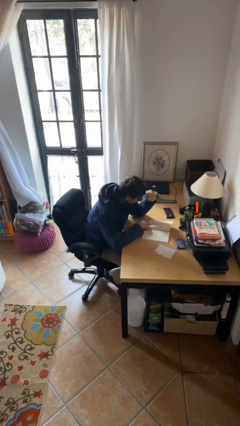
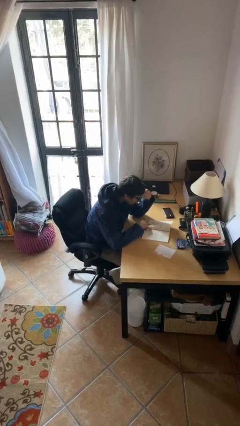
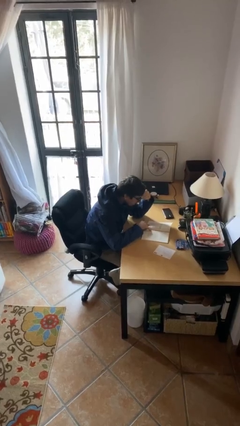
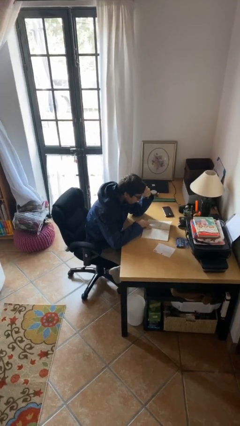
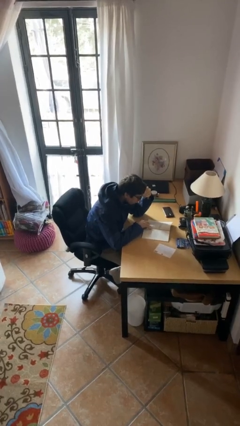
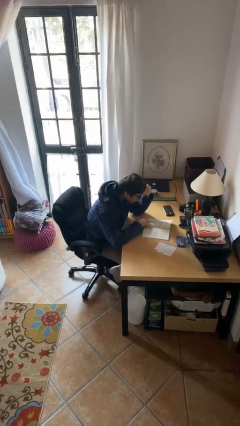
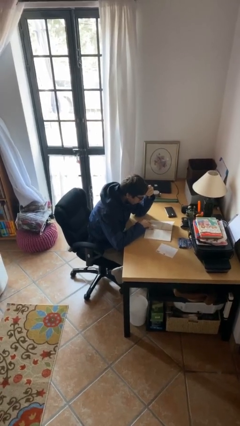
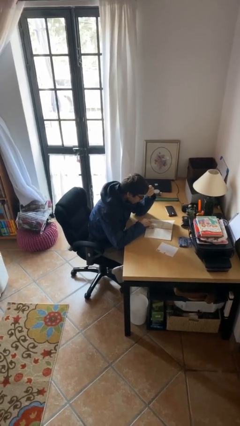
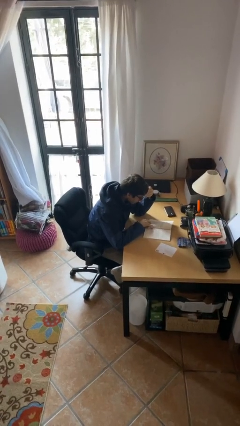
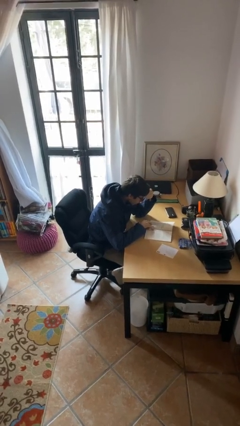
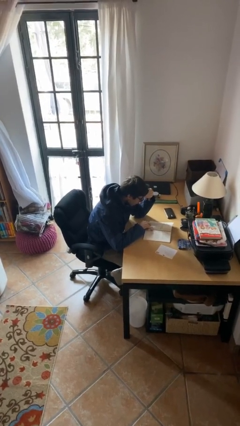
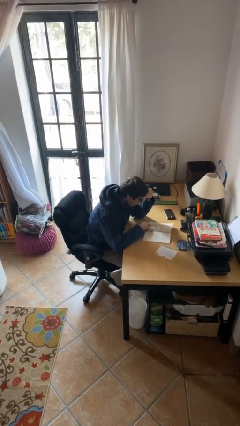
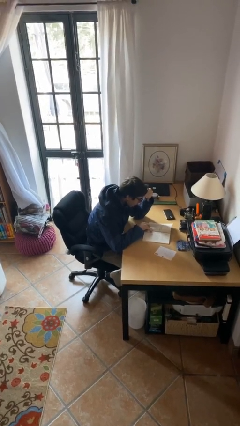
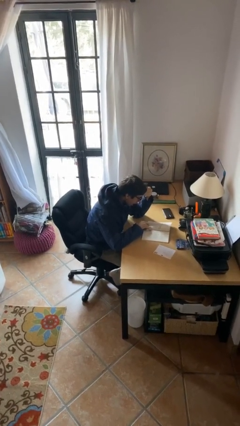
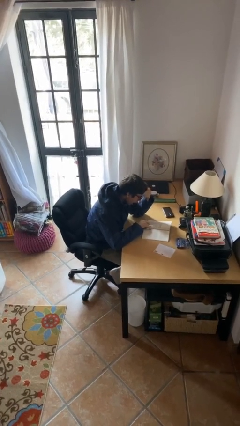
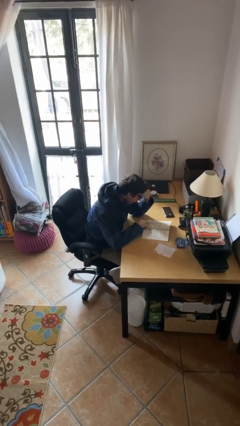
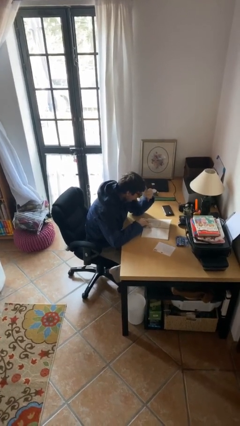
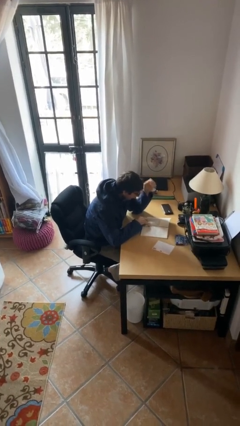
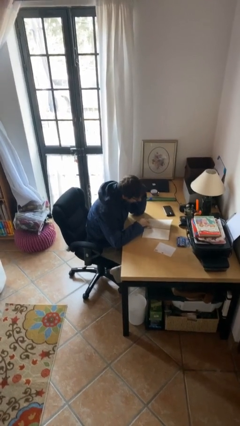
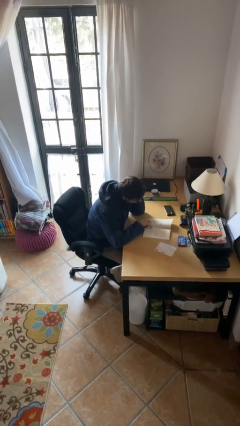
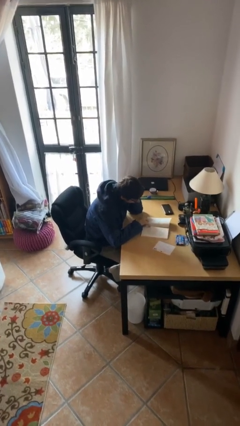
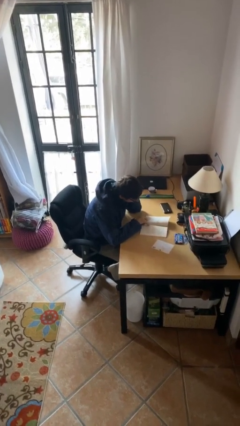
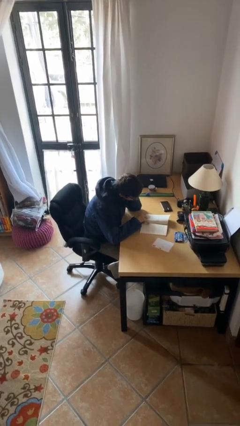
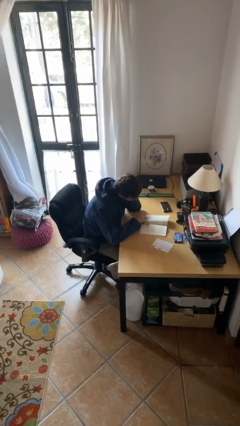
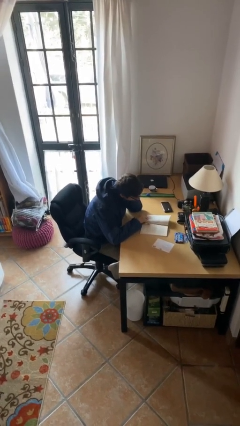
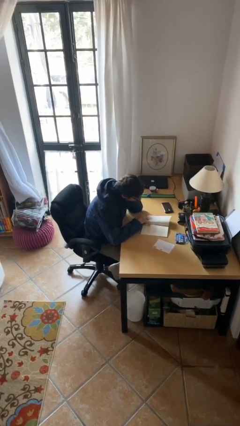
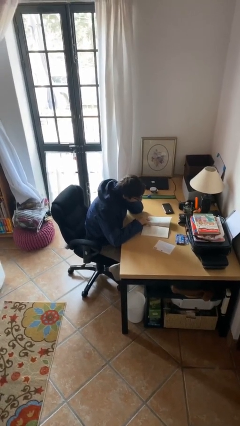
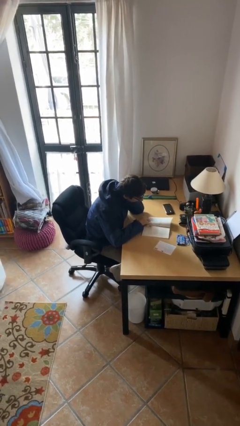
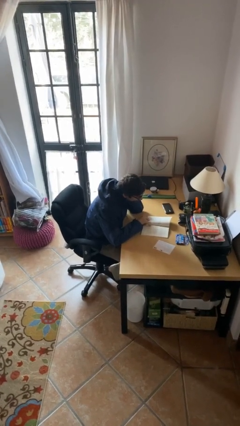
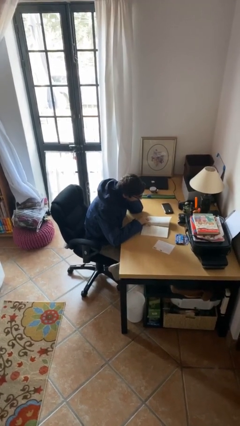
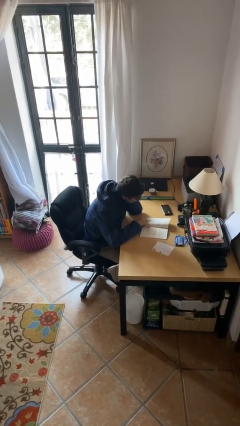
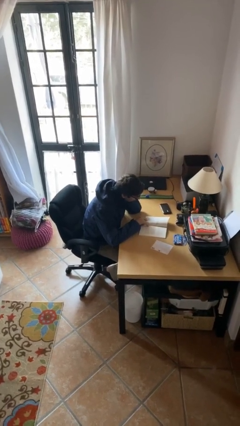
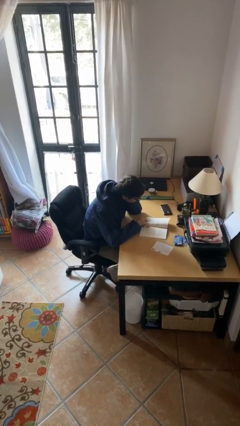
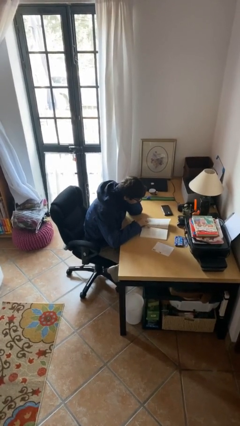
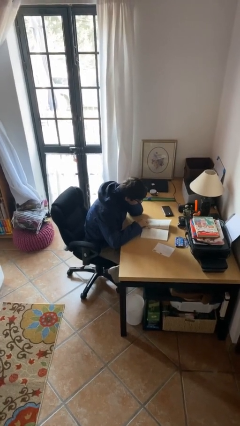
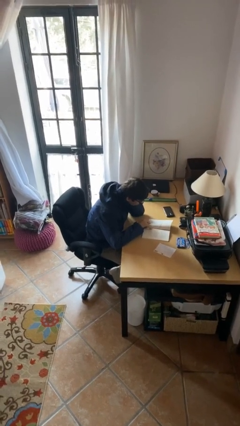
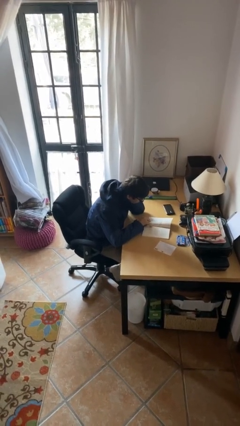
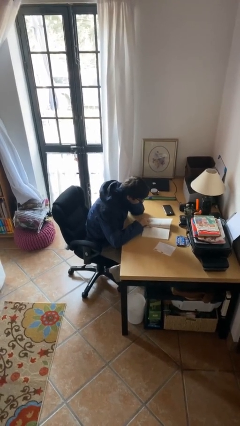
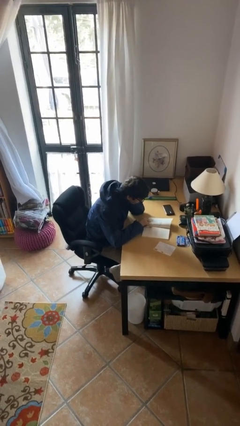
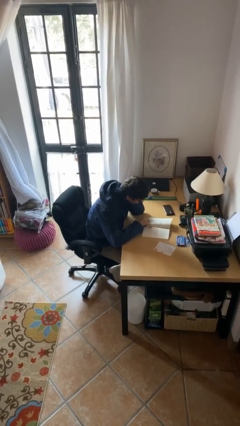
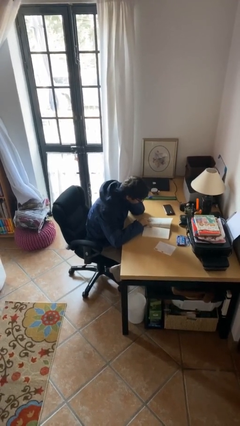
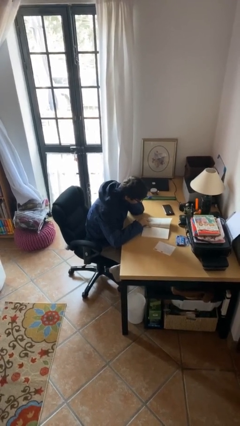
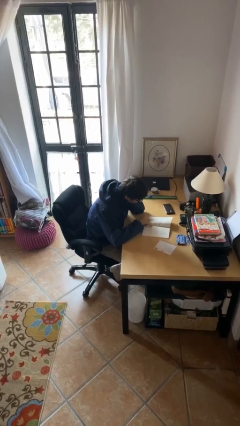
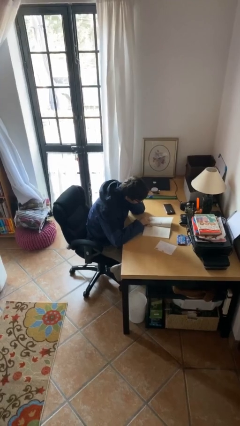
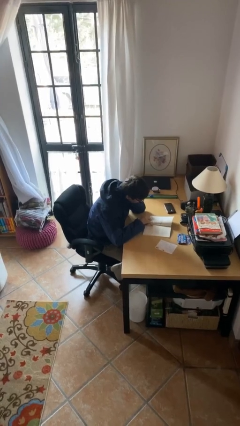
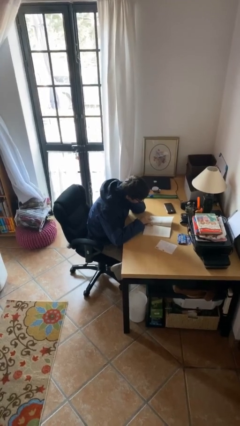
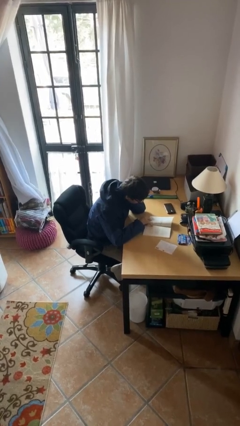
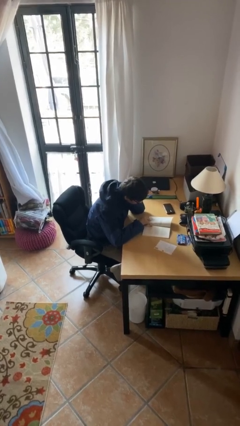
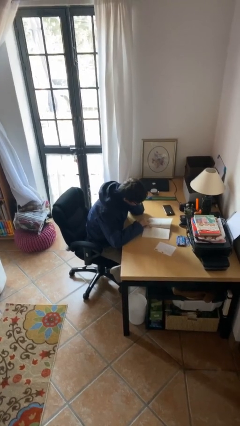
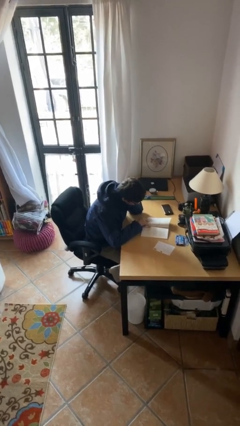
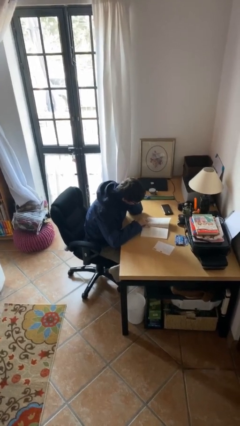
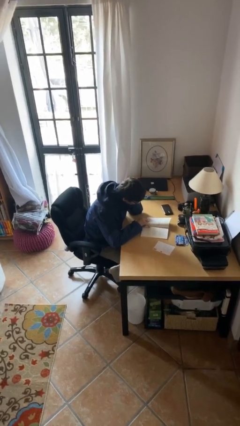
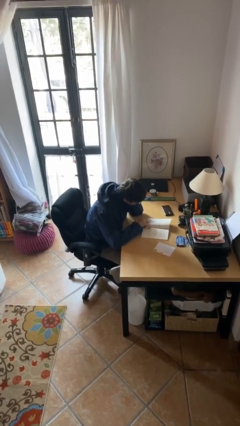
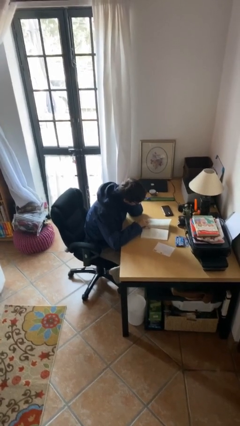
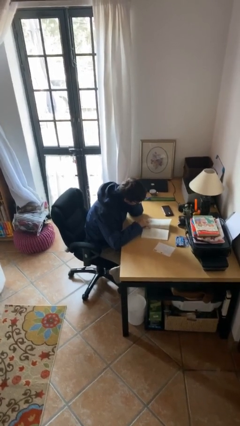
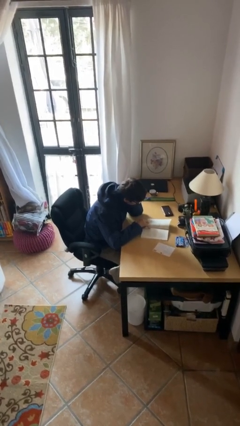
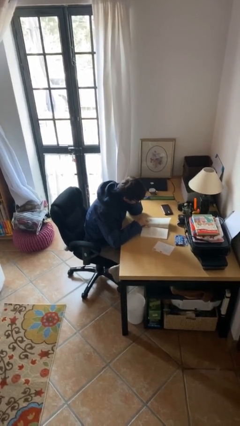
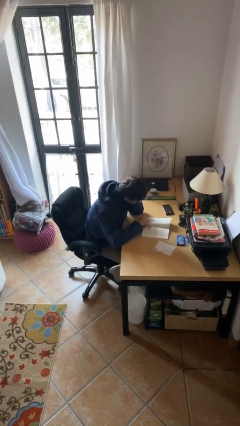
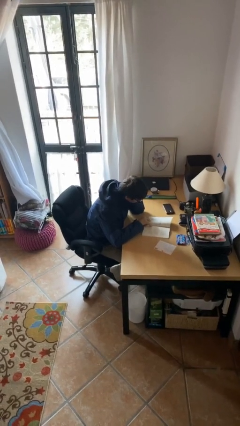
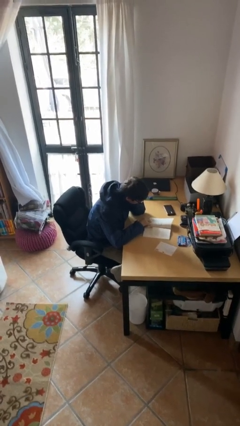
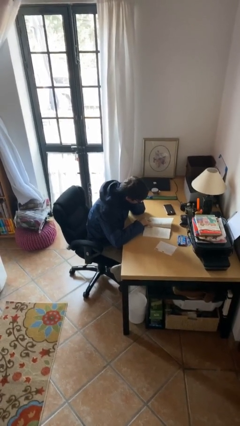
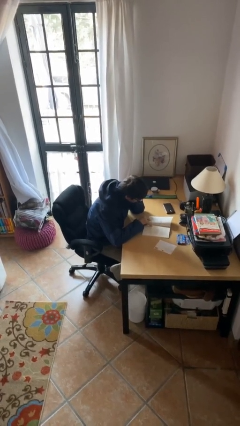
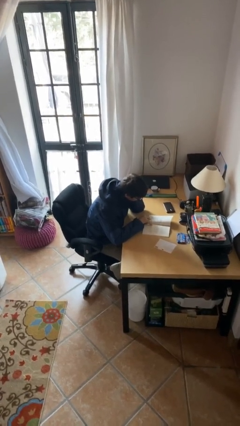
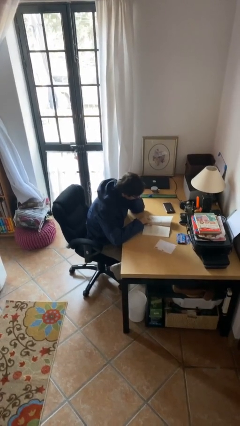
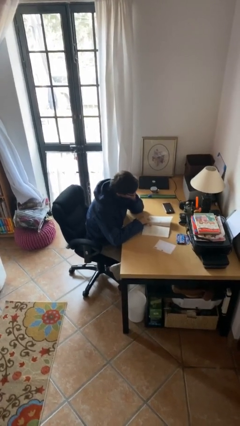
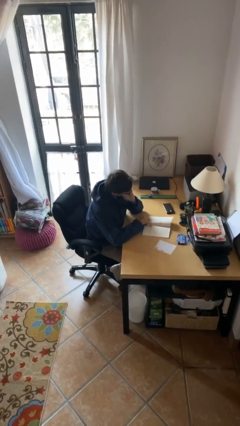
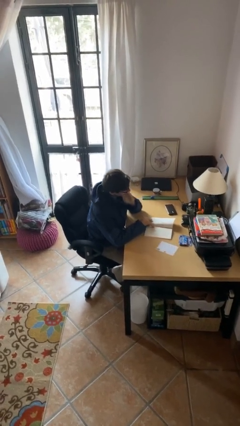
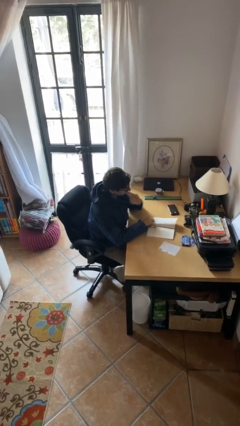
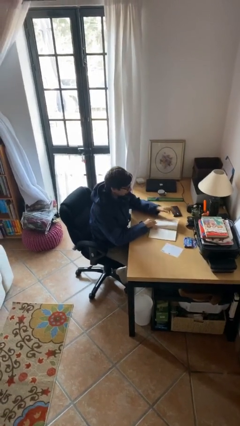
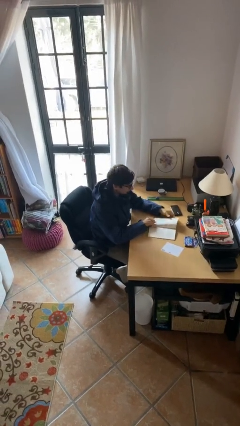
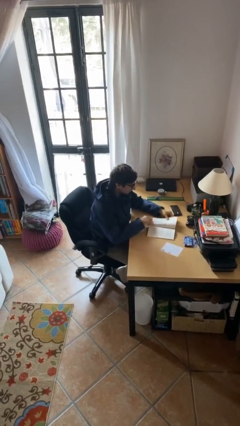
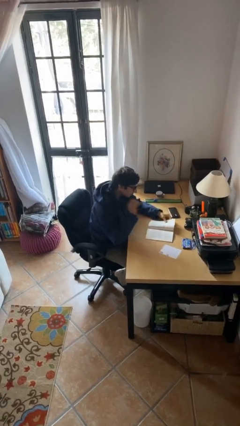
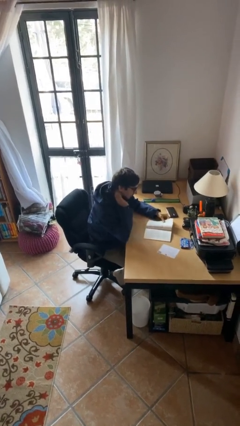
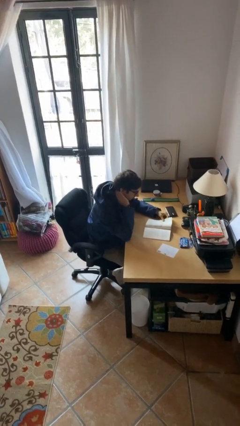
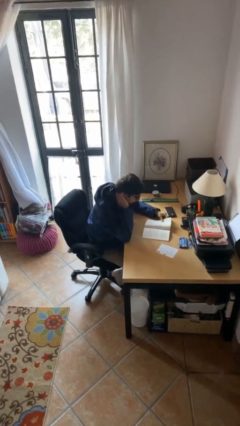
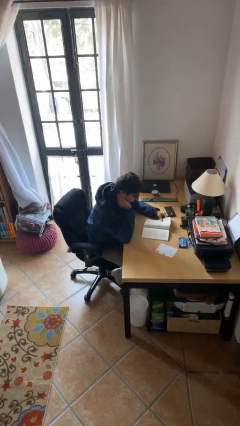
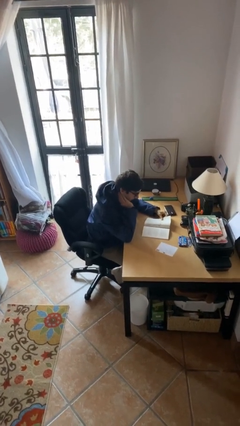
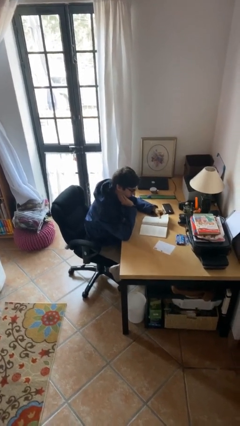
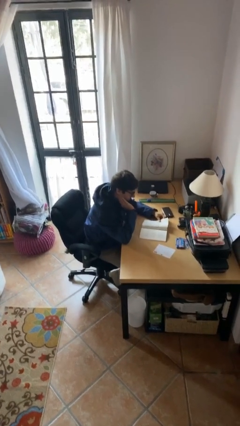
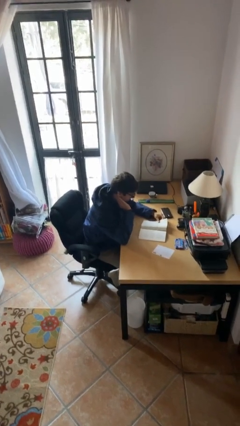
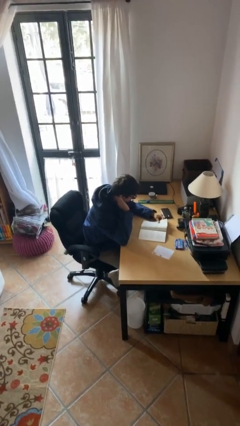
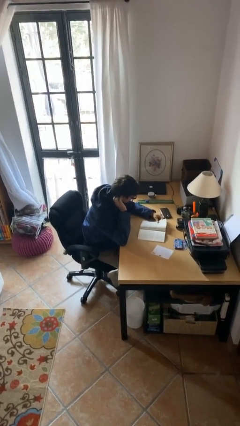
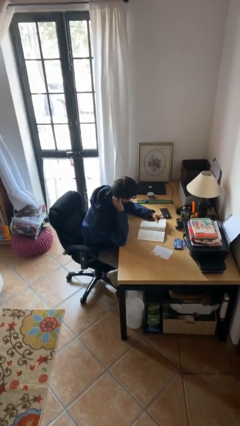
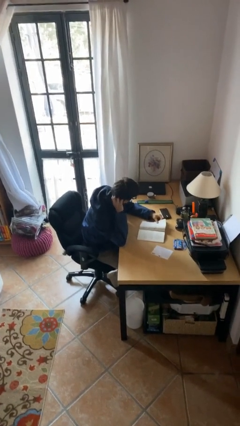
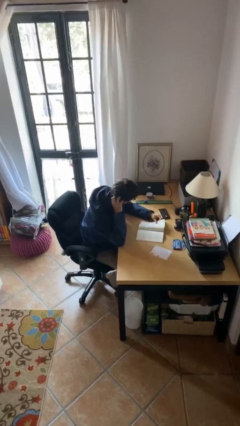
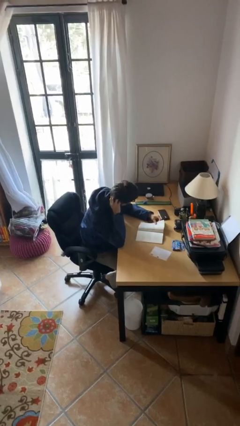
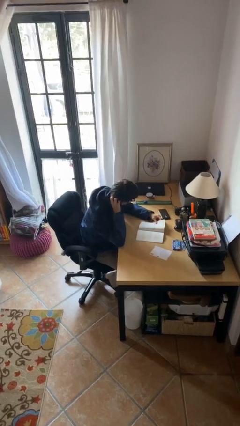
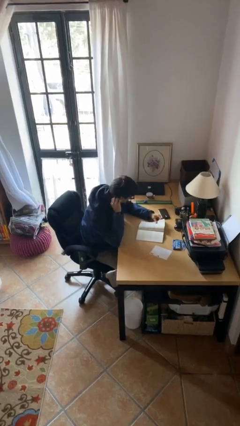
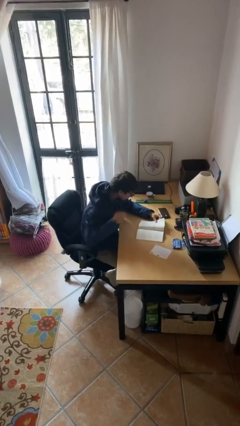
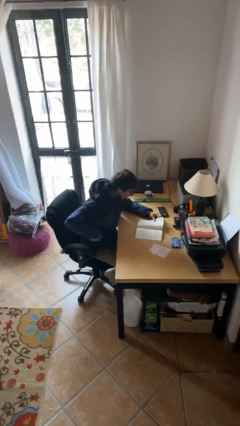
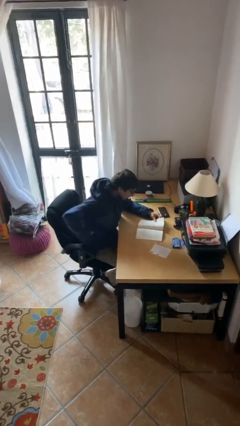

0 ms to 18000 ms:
person reads document

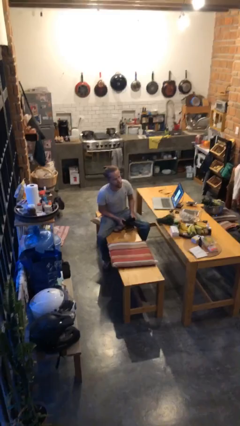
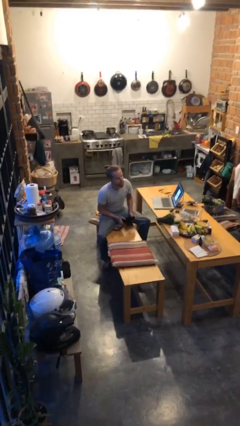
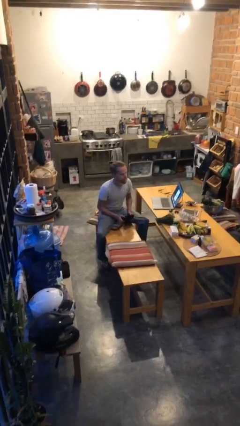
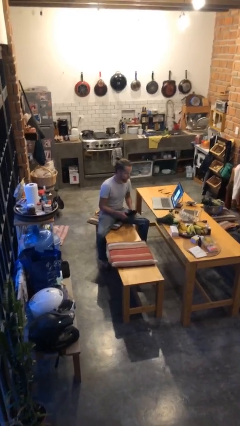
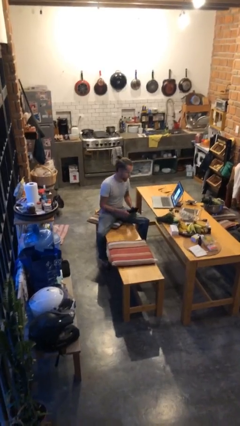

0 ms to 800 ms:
person interacts with handheld game
